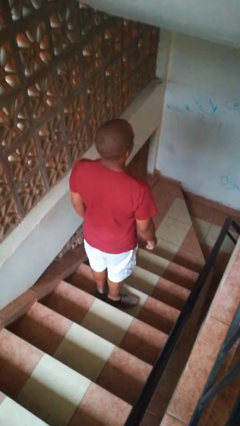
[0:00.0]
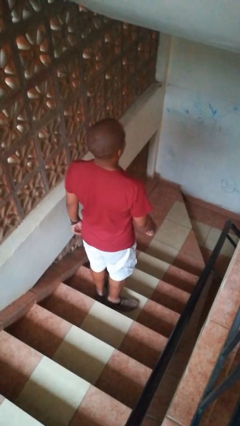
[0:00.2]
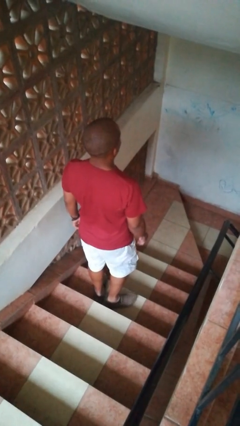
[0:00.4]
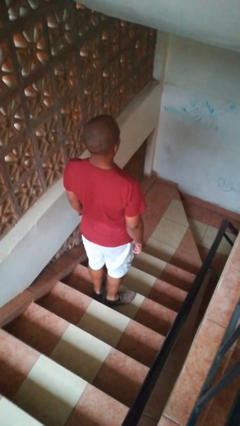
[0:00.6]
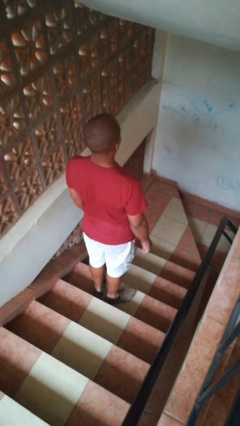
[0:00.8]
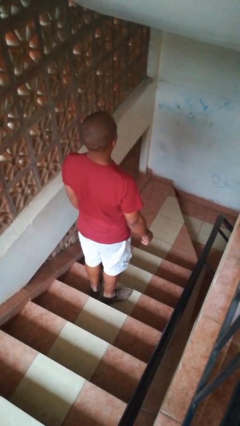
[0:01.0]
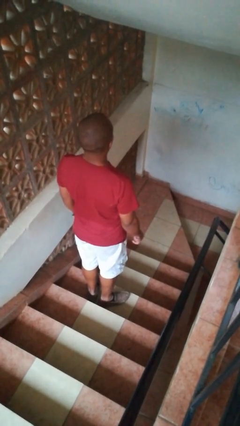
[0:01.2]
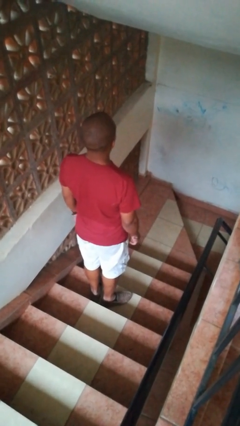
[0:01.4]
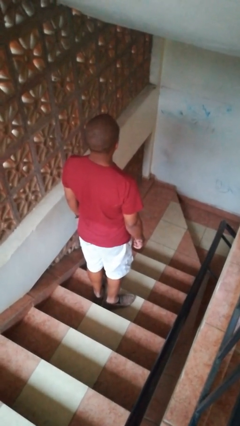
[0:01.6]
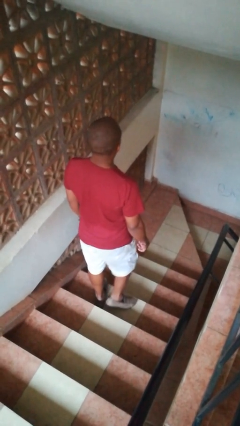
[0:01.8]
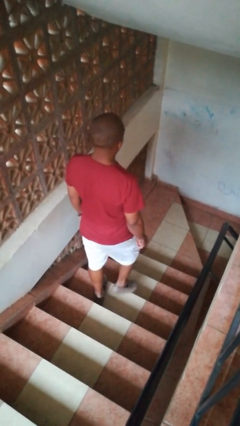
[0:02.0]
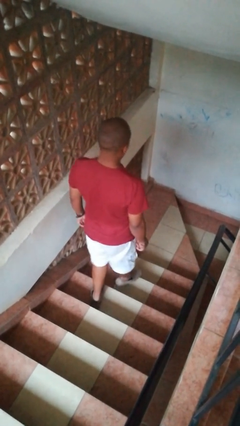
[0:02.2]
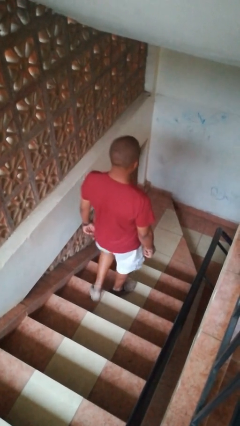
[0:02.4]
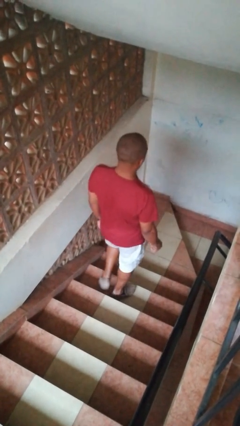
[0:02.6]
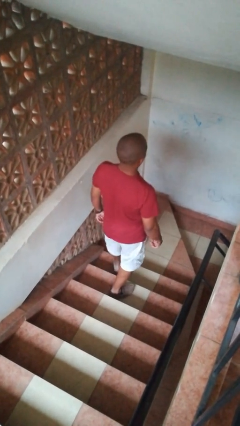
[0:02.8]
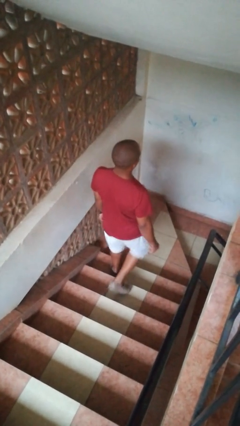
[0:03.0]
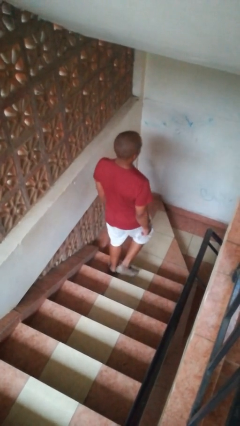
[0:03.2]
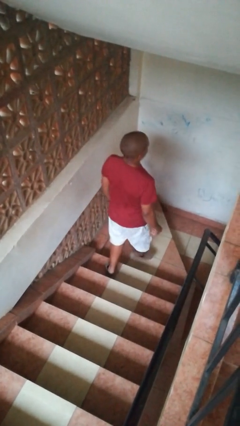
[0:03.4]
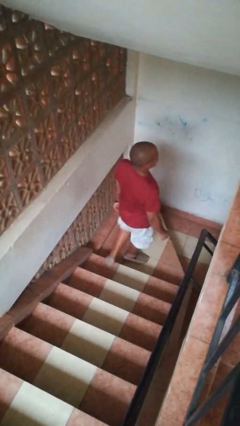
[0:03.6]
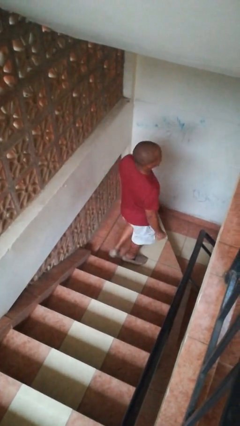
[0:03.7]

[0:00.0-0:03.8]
person climbs down stairs

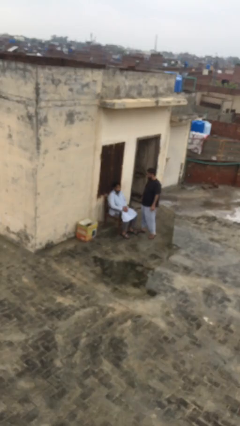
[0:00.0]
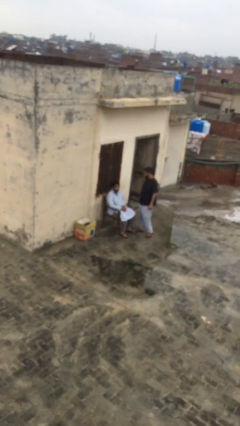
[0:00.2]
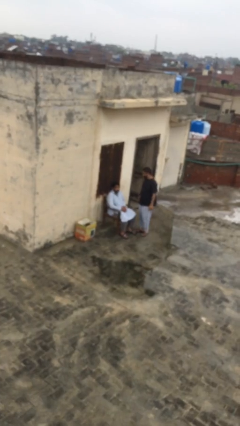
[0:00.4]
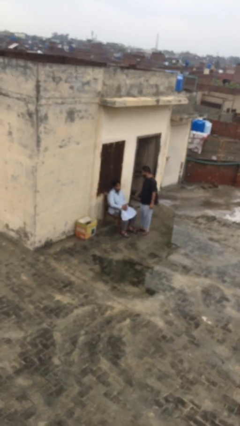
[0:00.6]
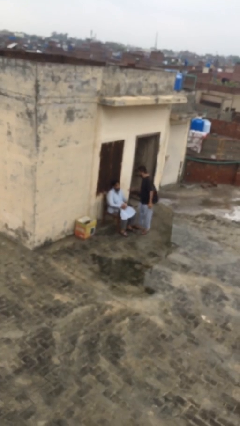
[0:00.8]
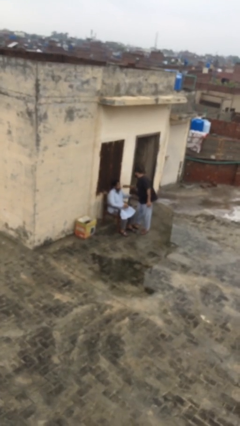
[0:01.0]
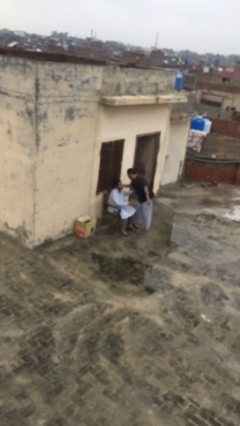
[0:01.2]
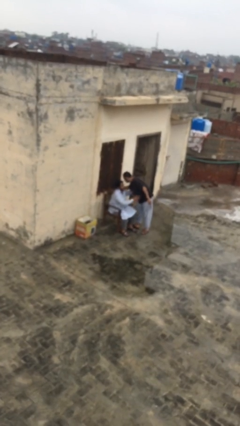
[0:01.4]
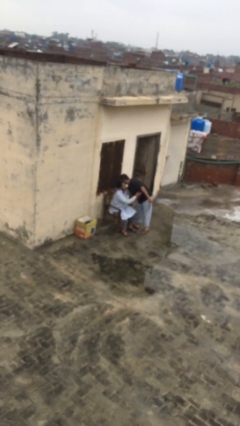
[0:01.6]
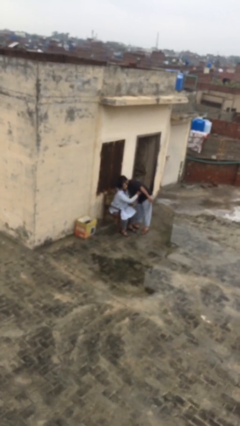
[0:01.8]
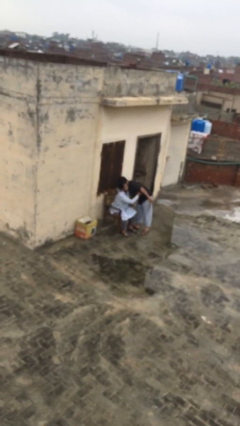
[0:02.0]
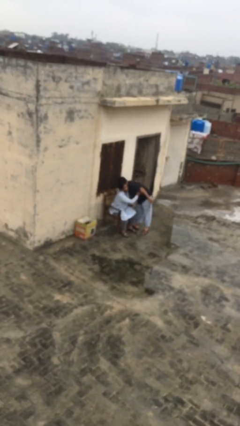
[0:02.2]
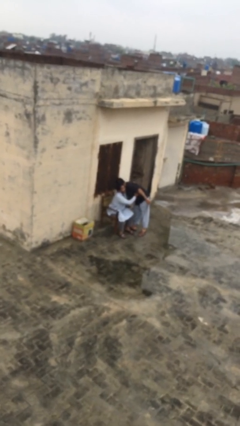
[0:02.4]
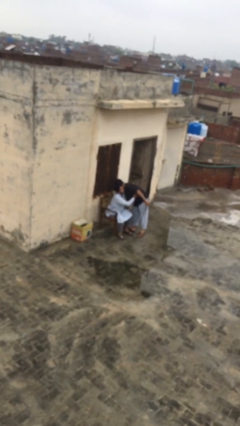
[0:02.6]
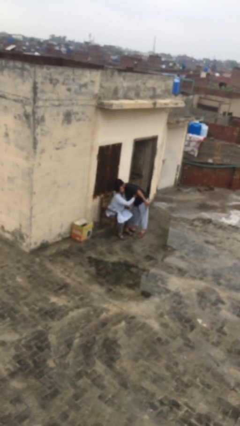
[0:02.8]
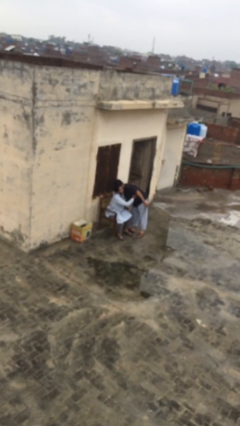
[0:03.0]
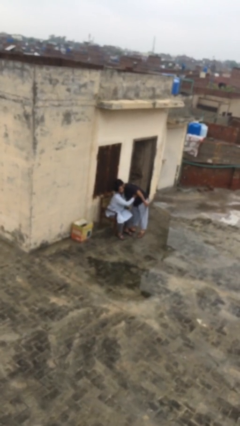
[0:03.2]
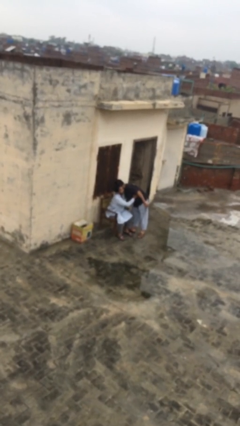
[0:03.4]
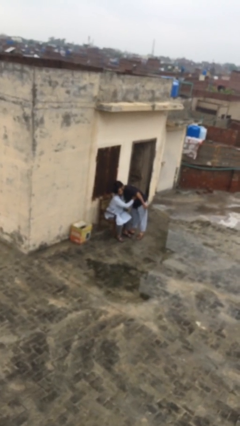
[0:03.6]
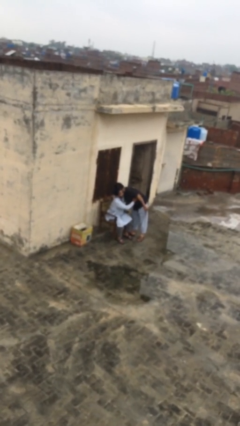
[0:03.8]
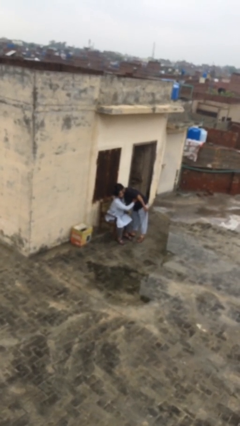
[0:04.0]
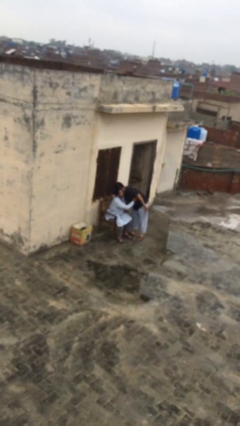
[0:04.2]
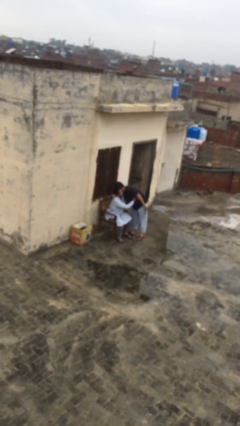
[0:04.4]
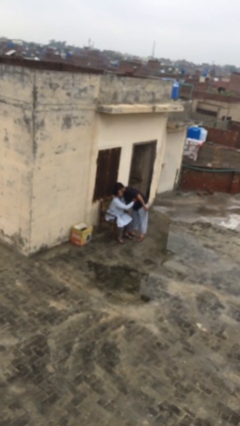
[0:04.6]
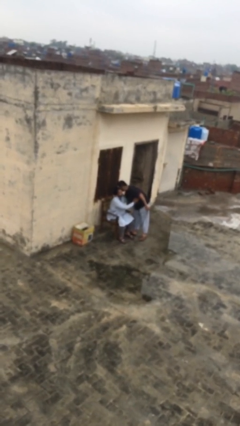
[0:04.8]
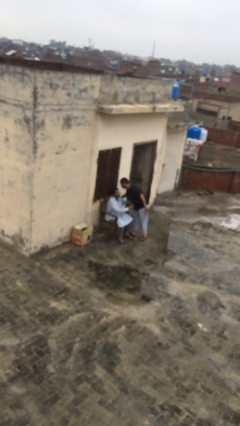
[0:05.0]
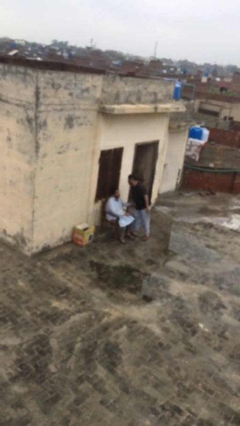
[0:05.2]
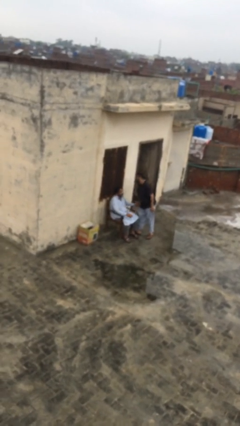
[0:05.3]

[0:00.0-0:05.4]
person embraces person

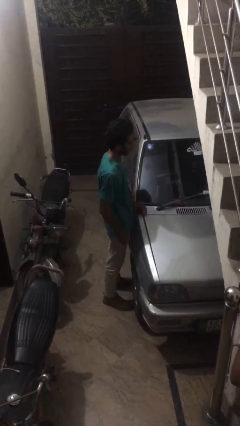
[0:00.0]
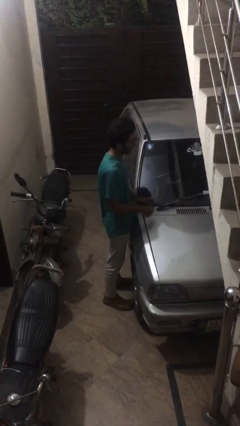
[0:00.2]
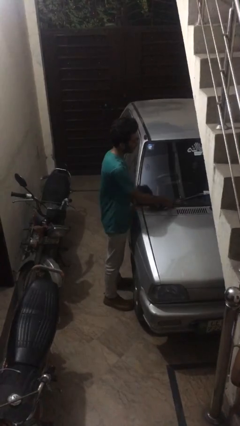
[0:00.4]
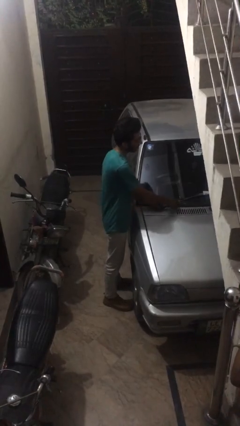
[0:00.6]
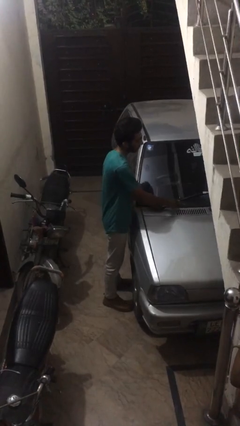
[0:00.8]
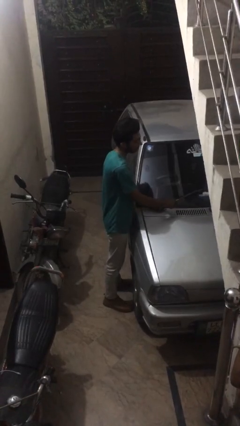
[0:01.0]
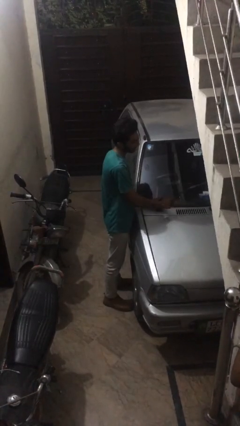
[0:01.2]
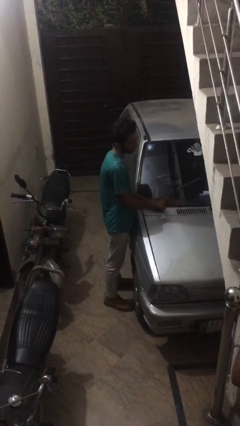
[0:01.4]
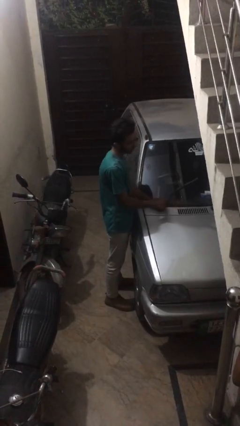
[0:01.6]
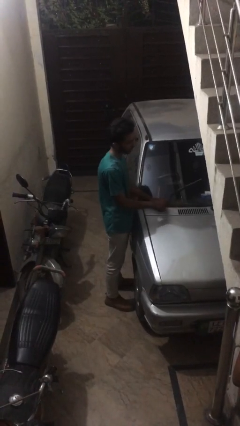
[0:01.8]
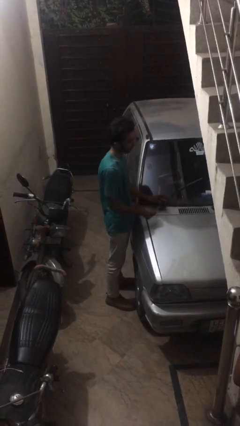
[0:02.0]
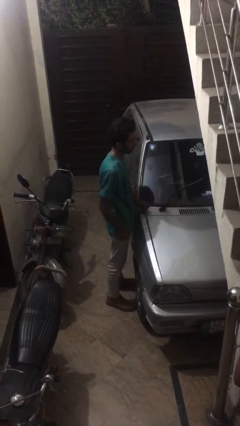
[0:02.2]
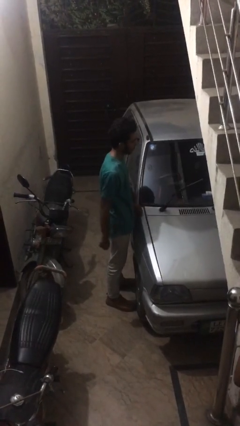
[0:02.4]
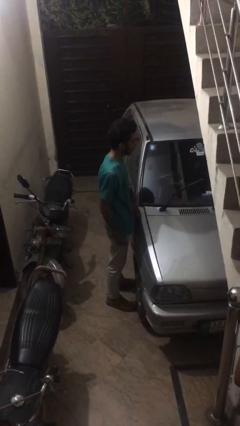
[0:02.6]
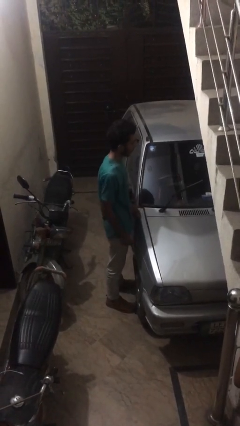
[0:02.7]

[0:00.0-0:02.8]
person flips up car wipers

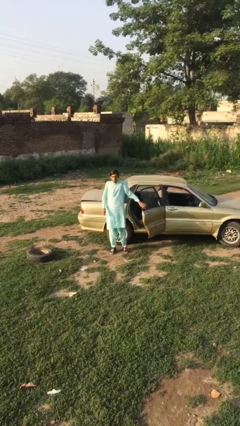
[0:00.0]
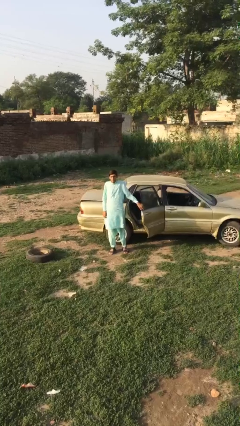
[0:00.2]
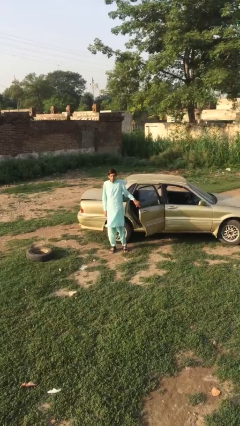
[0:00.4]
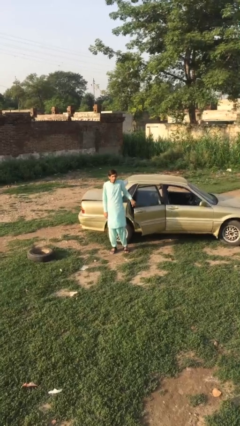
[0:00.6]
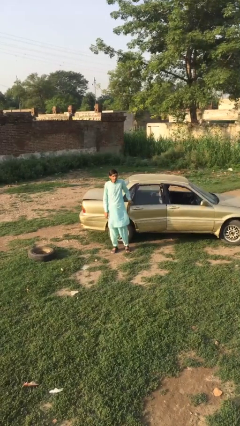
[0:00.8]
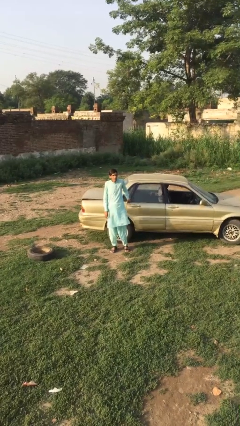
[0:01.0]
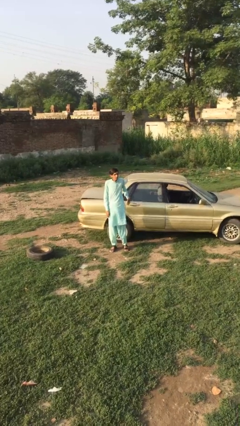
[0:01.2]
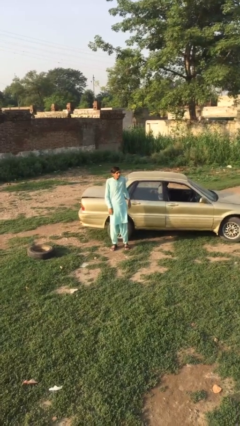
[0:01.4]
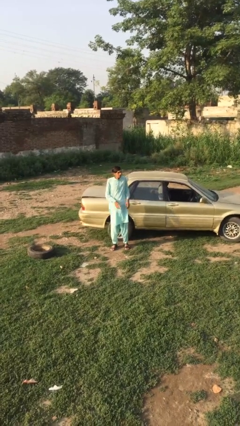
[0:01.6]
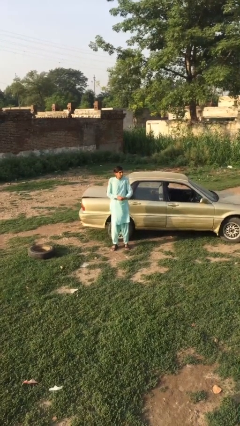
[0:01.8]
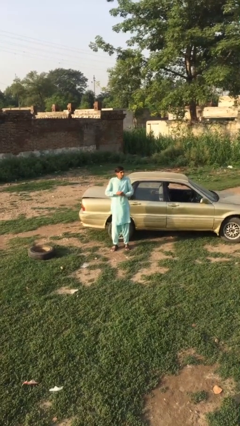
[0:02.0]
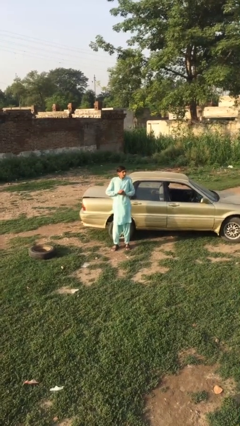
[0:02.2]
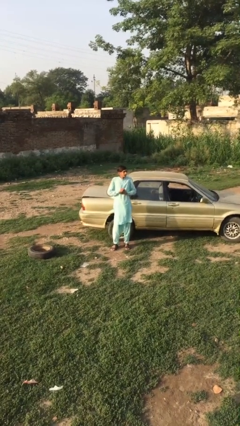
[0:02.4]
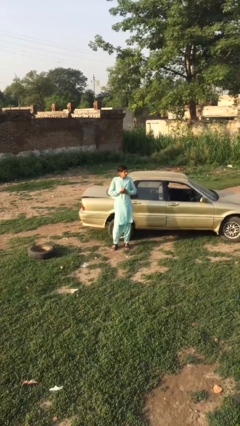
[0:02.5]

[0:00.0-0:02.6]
person closes car door

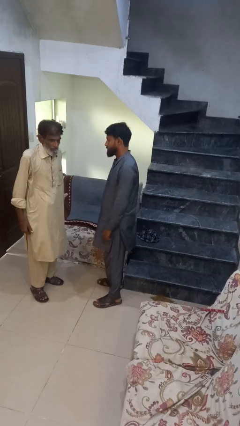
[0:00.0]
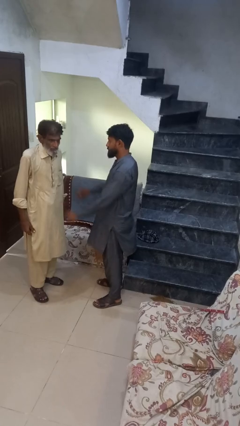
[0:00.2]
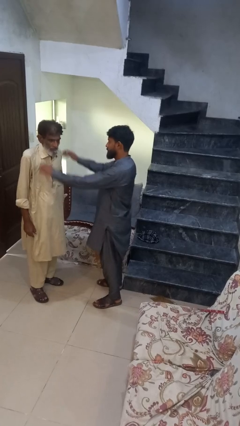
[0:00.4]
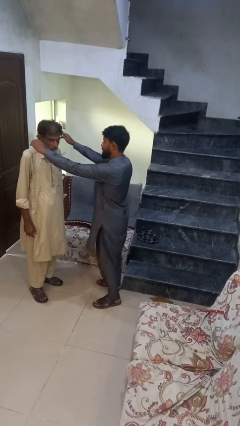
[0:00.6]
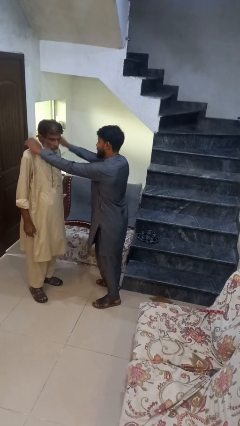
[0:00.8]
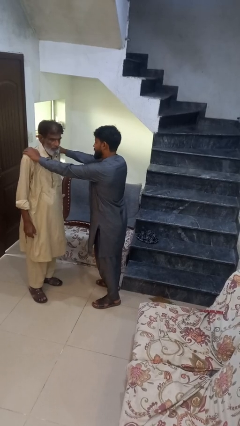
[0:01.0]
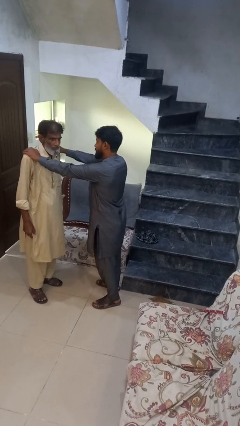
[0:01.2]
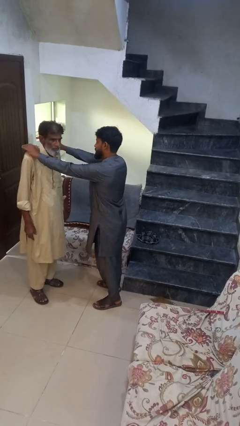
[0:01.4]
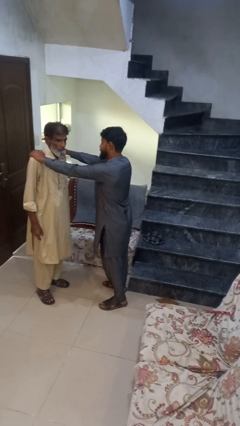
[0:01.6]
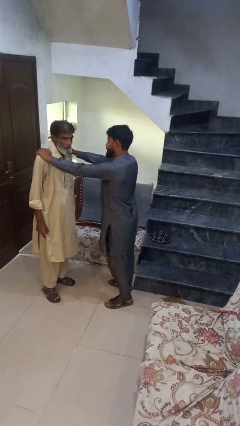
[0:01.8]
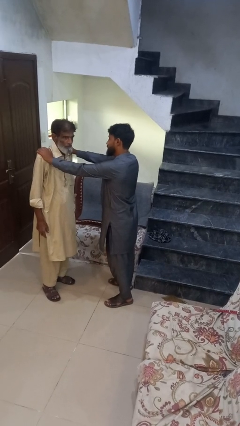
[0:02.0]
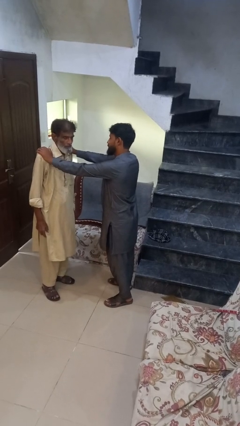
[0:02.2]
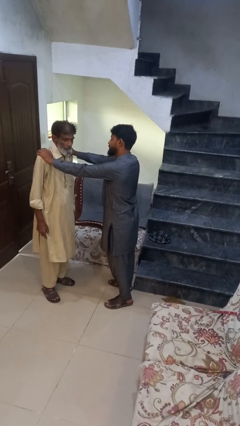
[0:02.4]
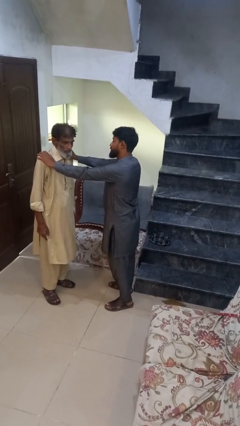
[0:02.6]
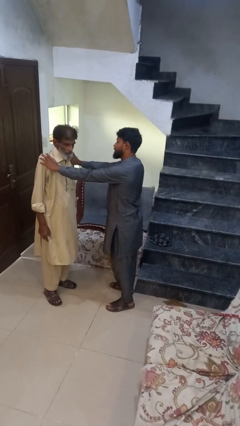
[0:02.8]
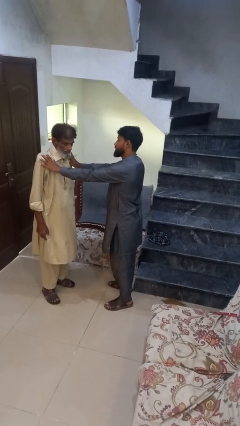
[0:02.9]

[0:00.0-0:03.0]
person pounds shoulders of person

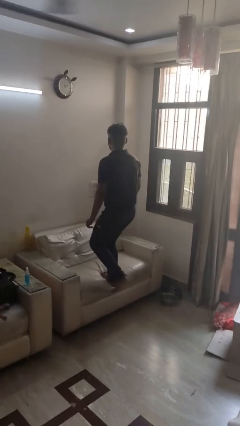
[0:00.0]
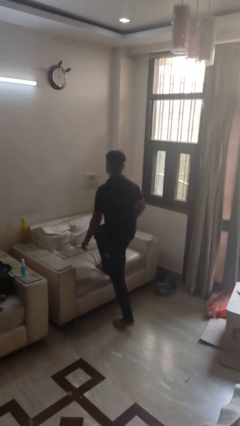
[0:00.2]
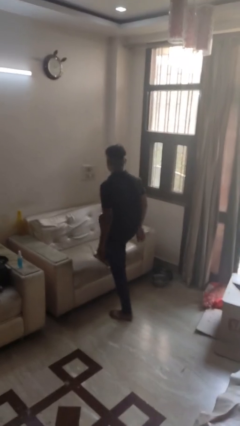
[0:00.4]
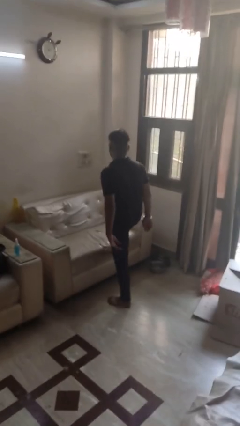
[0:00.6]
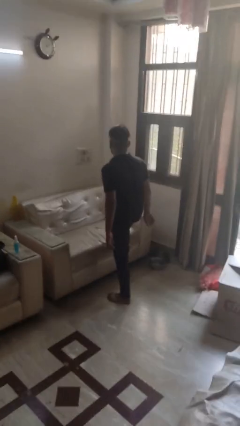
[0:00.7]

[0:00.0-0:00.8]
person climbs off couch
